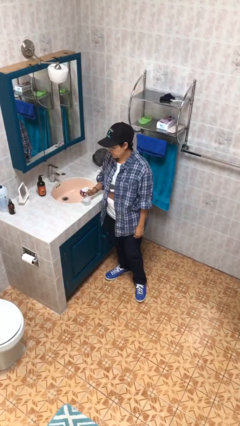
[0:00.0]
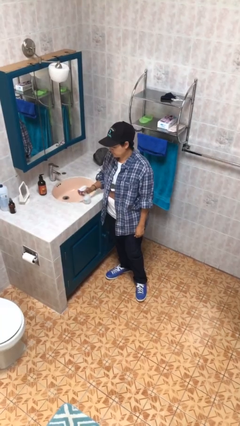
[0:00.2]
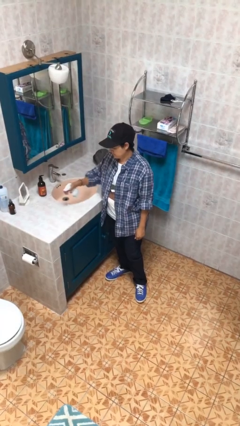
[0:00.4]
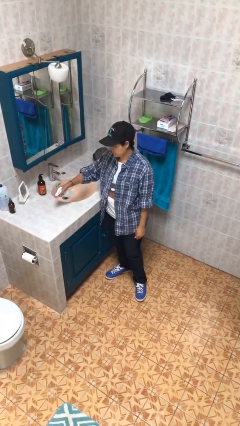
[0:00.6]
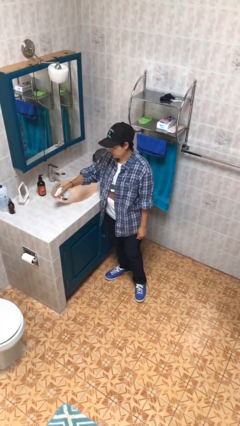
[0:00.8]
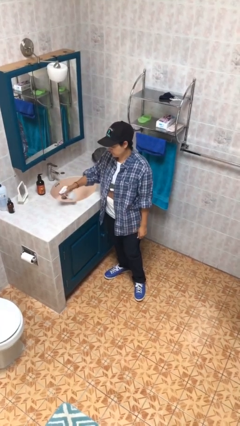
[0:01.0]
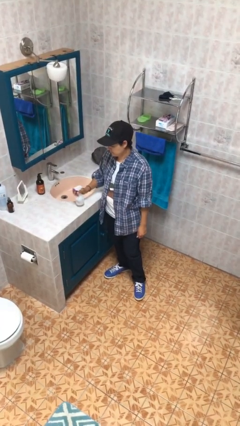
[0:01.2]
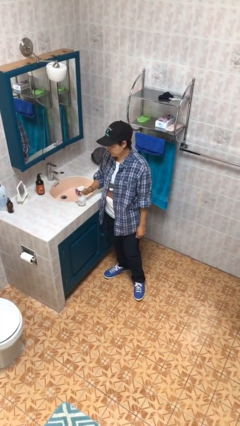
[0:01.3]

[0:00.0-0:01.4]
person sprays from bottle

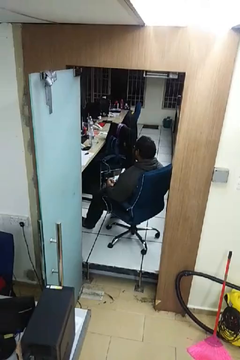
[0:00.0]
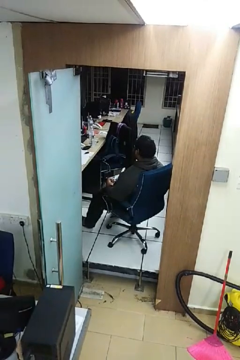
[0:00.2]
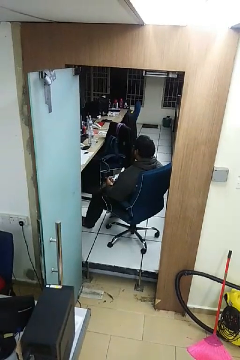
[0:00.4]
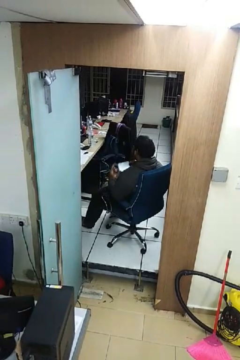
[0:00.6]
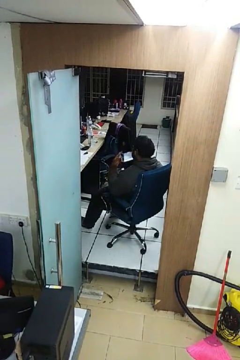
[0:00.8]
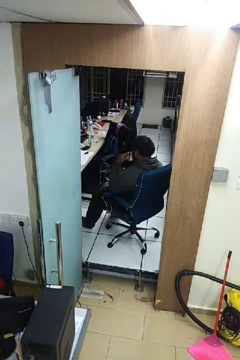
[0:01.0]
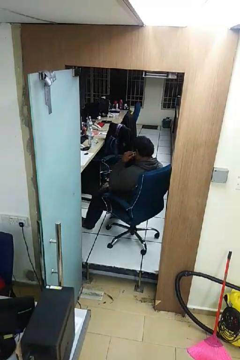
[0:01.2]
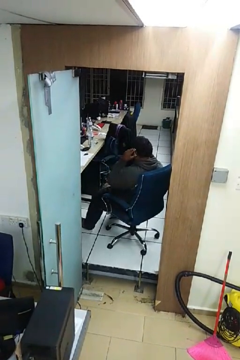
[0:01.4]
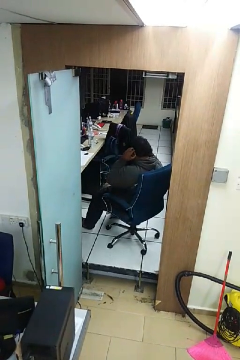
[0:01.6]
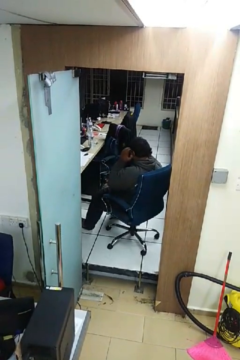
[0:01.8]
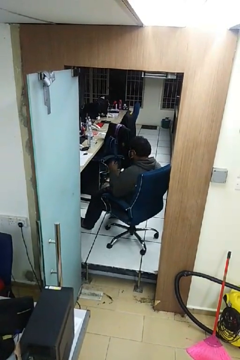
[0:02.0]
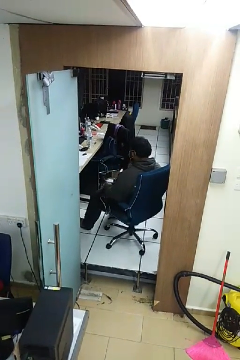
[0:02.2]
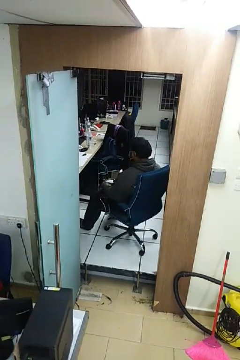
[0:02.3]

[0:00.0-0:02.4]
person puts on facemask

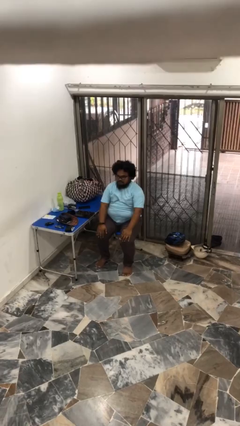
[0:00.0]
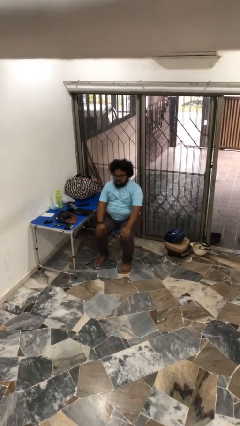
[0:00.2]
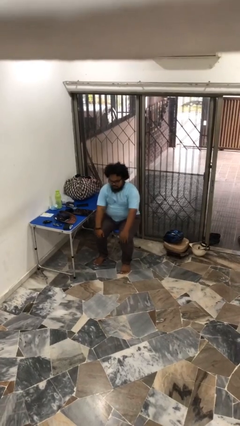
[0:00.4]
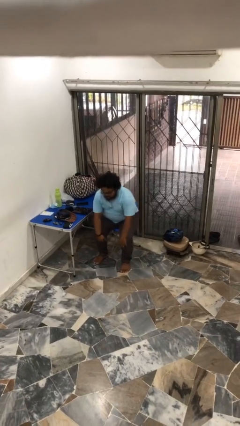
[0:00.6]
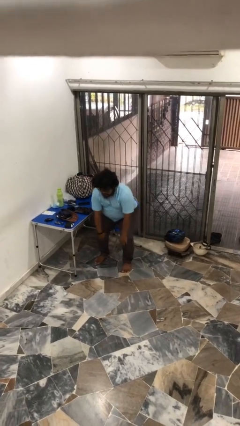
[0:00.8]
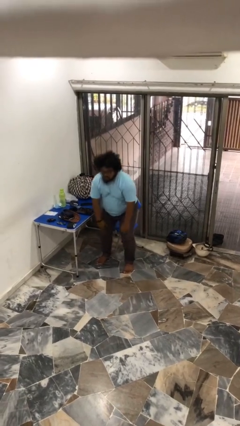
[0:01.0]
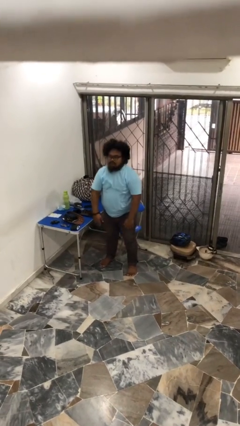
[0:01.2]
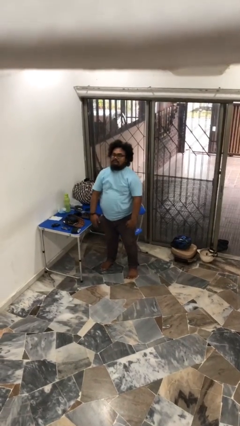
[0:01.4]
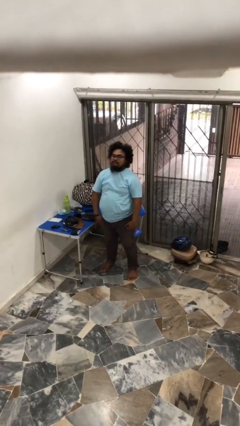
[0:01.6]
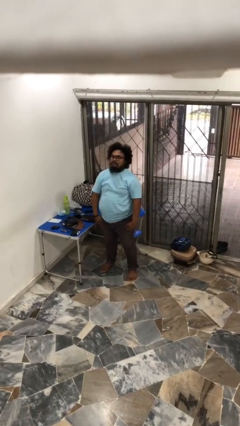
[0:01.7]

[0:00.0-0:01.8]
person stands up

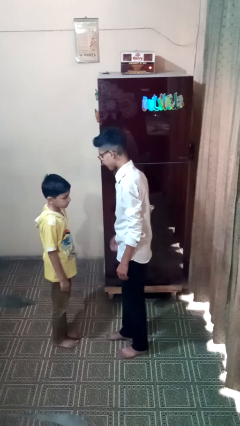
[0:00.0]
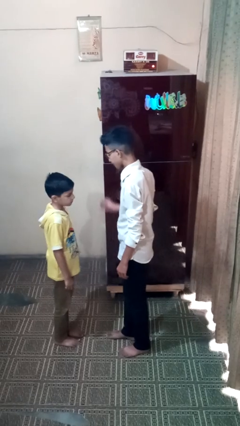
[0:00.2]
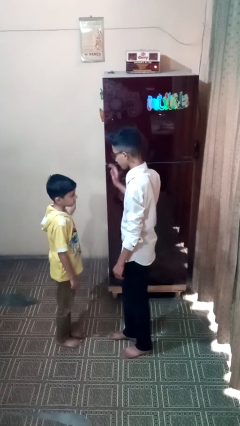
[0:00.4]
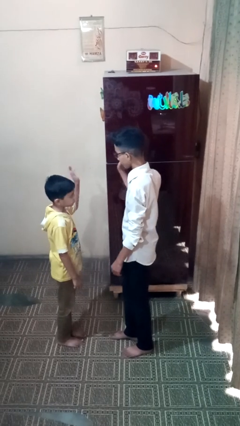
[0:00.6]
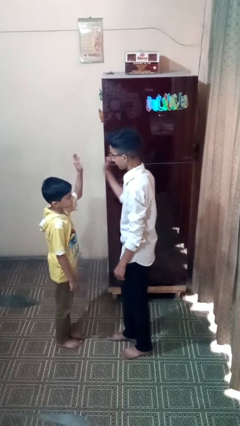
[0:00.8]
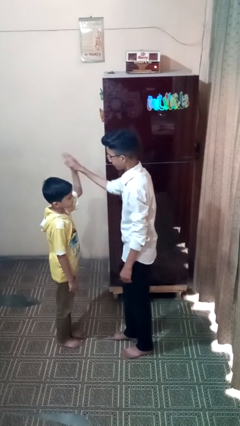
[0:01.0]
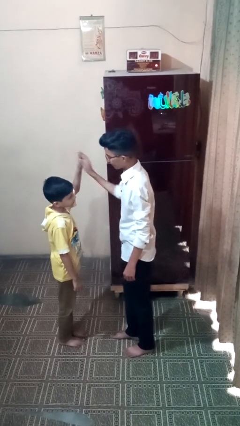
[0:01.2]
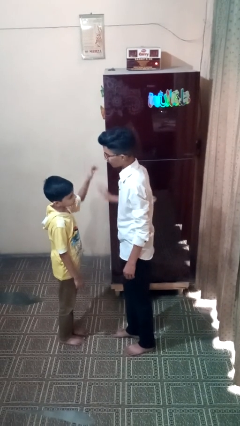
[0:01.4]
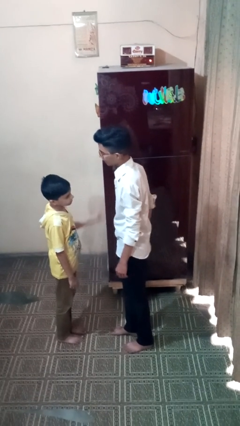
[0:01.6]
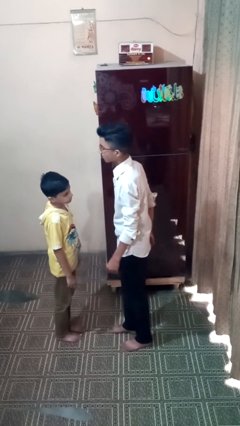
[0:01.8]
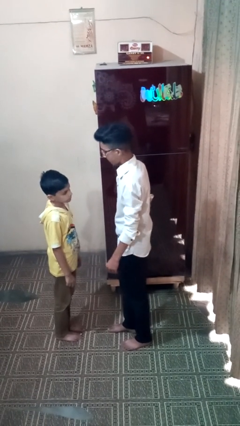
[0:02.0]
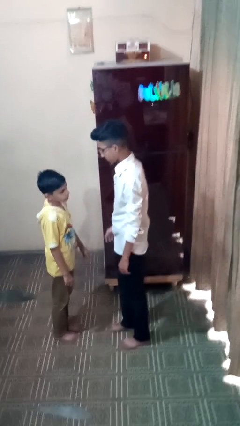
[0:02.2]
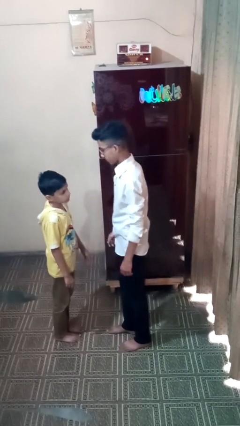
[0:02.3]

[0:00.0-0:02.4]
person highfives hand

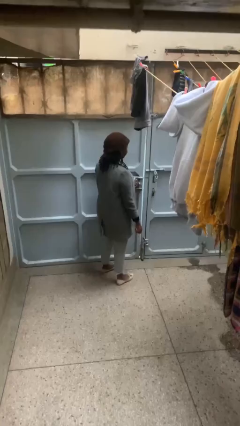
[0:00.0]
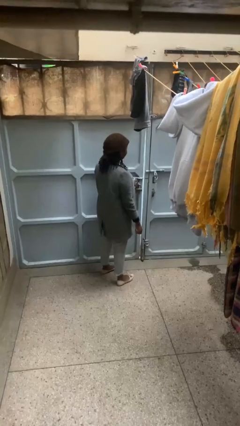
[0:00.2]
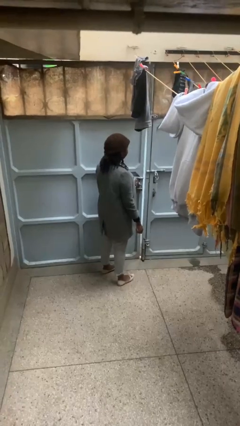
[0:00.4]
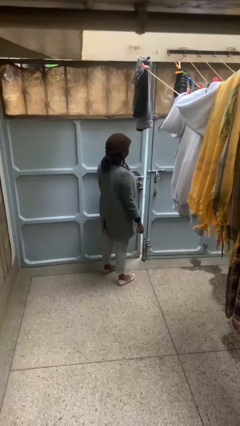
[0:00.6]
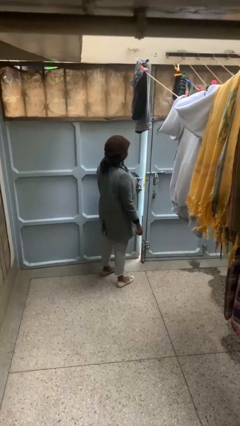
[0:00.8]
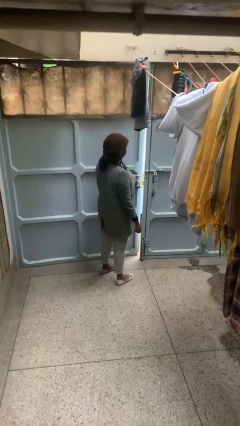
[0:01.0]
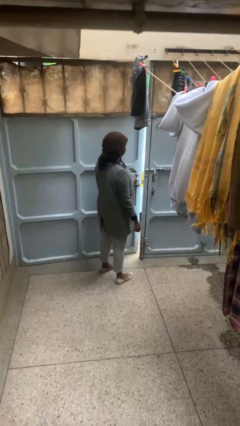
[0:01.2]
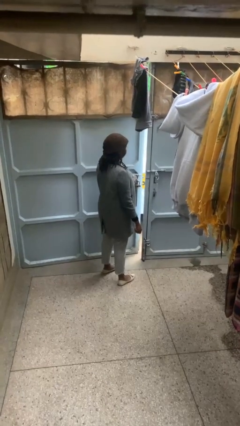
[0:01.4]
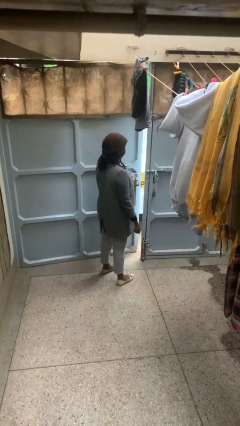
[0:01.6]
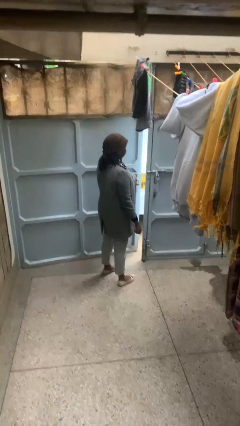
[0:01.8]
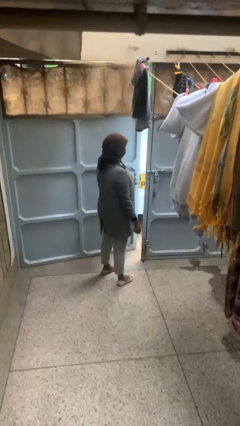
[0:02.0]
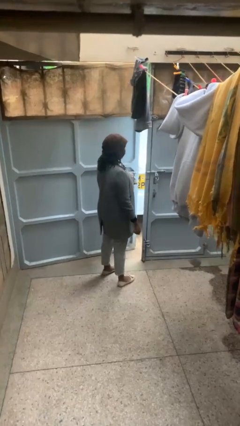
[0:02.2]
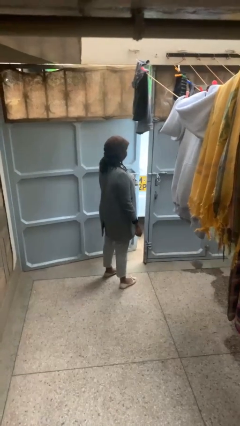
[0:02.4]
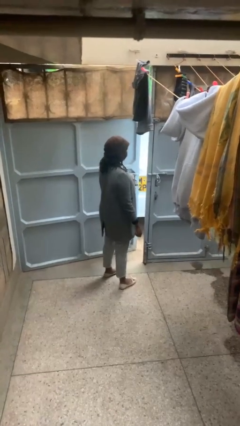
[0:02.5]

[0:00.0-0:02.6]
person opens gate

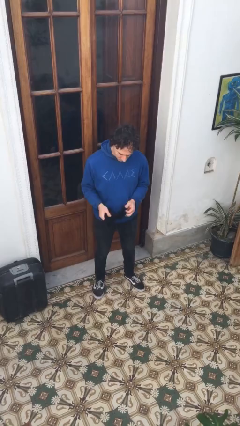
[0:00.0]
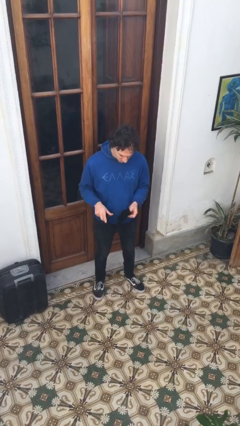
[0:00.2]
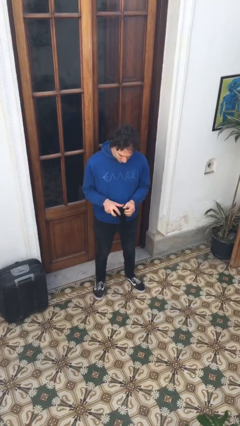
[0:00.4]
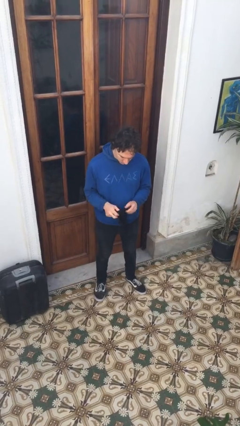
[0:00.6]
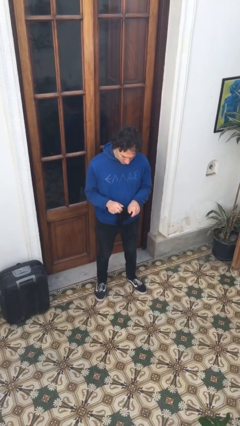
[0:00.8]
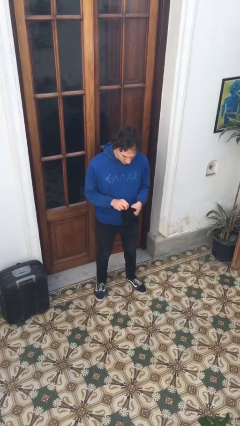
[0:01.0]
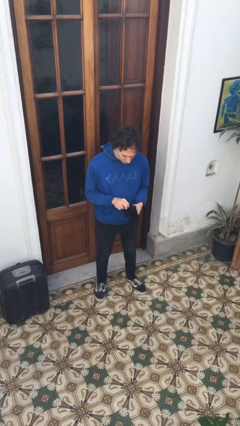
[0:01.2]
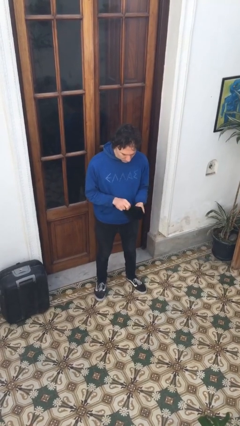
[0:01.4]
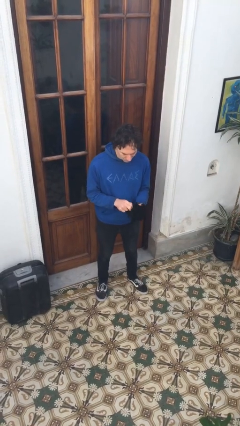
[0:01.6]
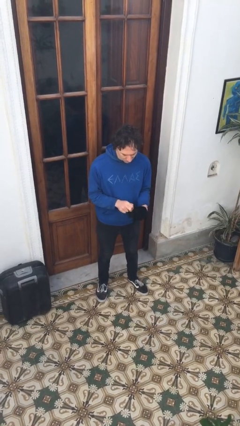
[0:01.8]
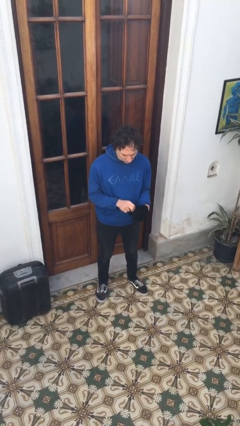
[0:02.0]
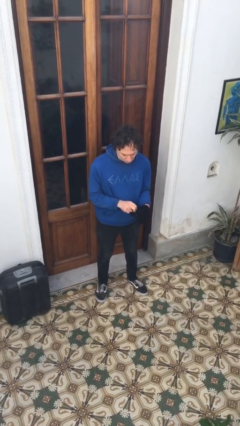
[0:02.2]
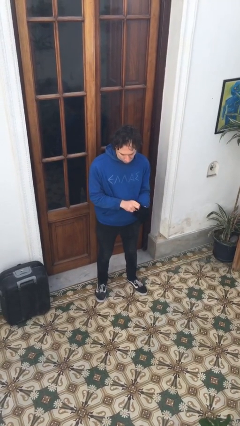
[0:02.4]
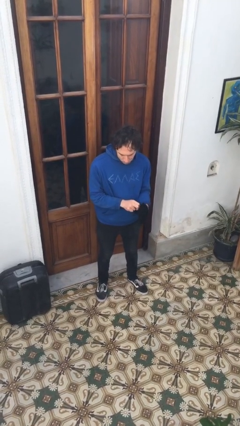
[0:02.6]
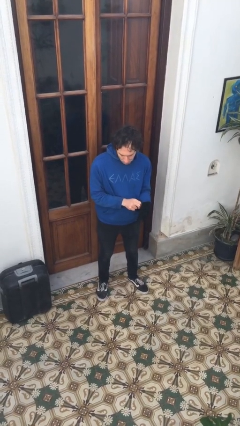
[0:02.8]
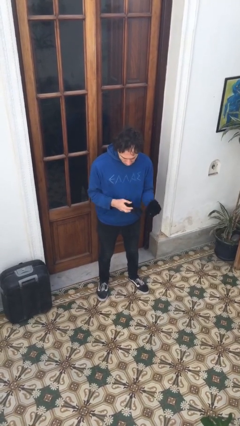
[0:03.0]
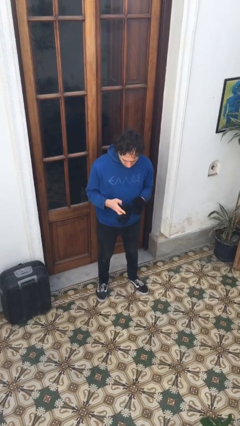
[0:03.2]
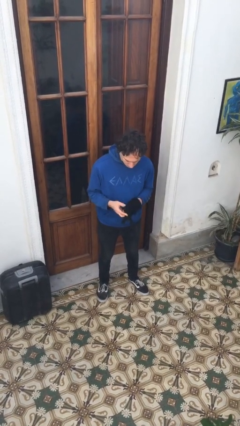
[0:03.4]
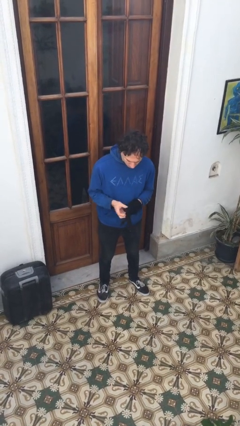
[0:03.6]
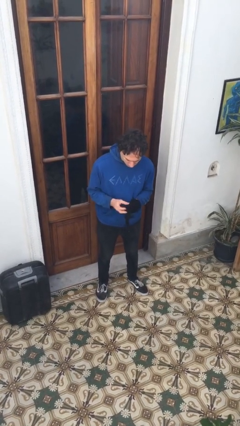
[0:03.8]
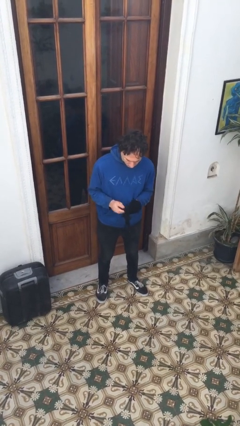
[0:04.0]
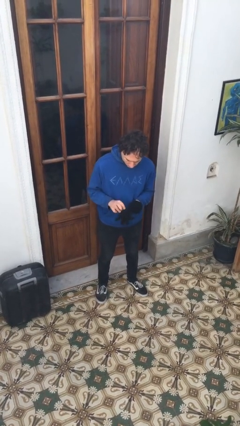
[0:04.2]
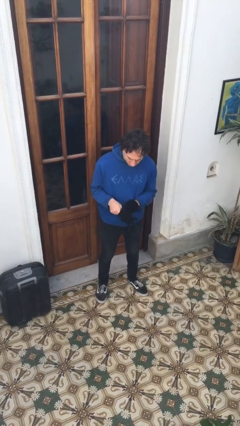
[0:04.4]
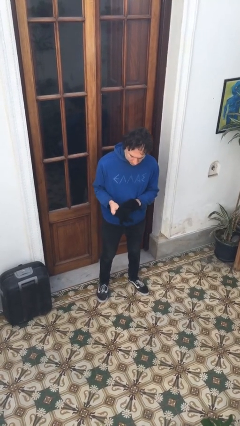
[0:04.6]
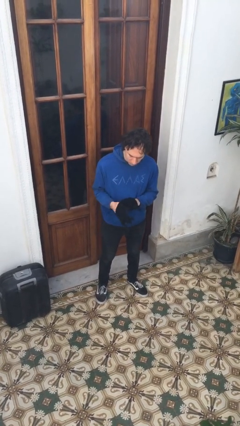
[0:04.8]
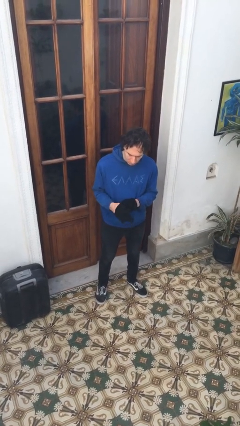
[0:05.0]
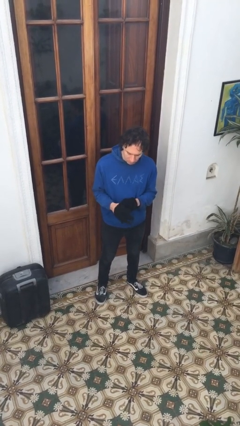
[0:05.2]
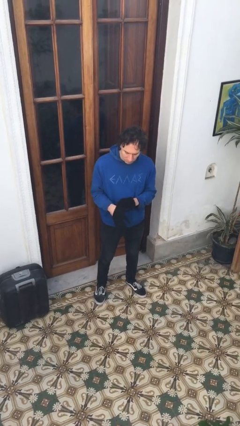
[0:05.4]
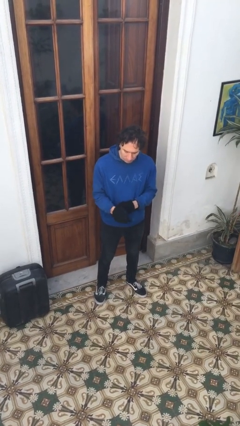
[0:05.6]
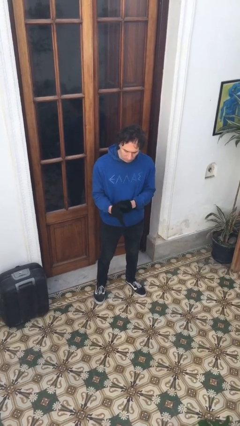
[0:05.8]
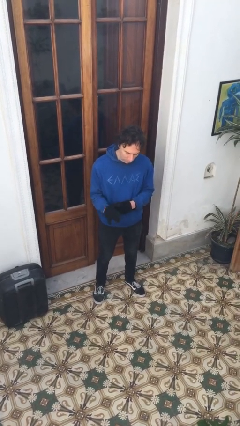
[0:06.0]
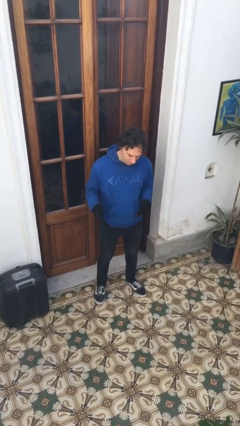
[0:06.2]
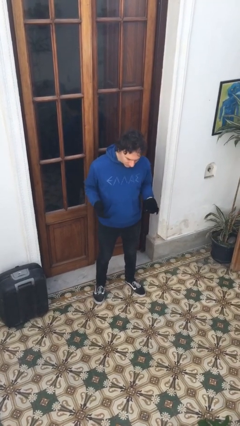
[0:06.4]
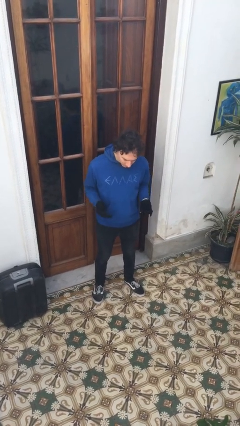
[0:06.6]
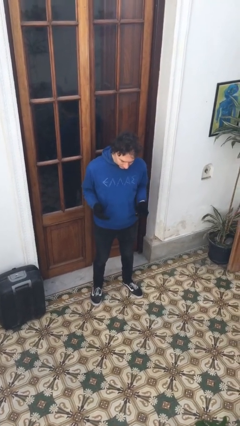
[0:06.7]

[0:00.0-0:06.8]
person puts on gloves
